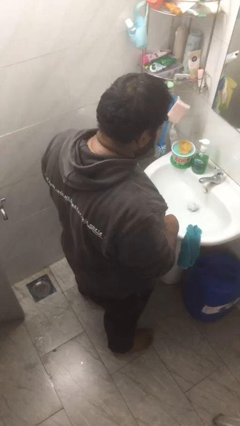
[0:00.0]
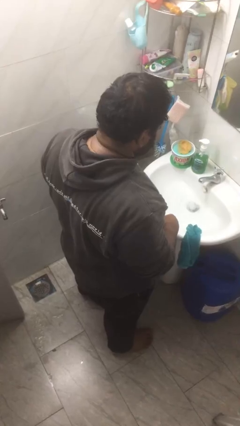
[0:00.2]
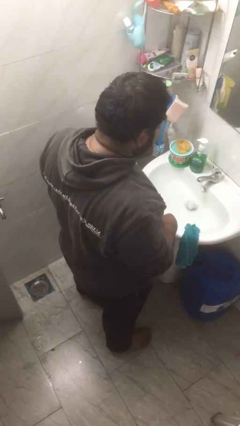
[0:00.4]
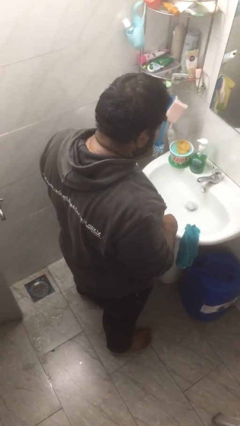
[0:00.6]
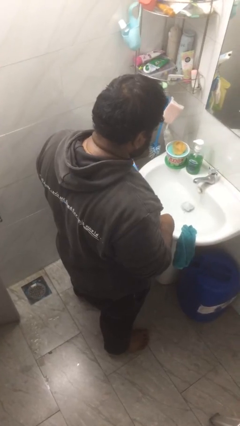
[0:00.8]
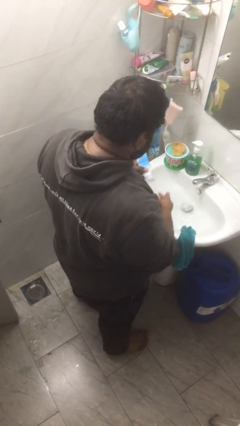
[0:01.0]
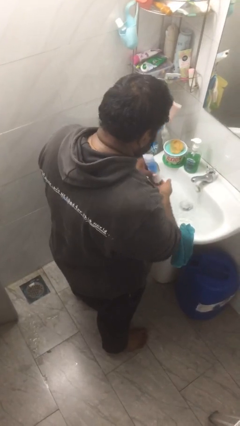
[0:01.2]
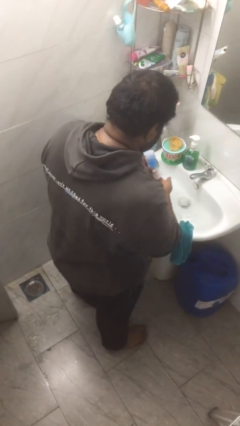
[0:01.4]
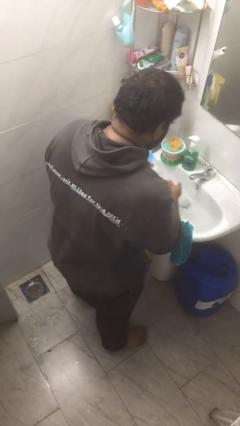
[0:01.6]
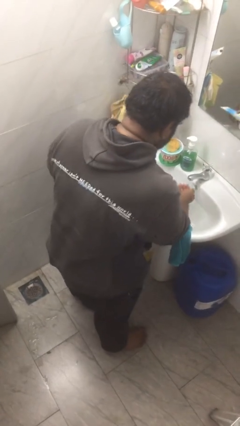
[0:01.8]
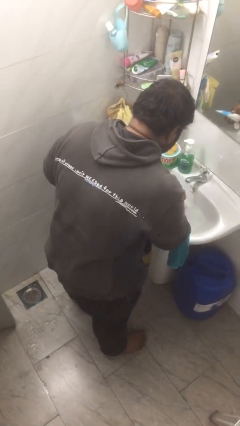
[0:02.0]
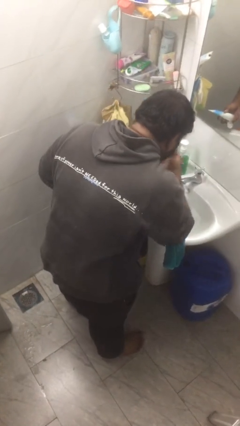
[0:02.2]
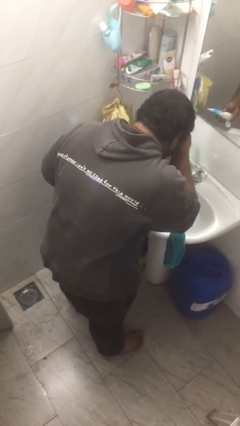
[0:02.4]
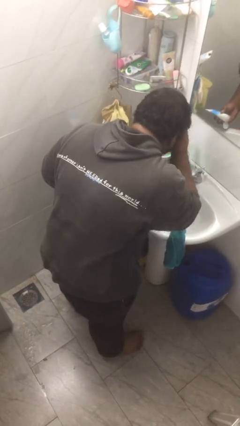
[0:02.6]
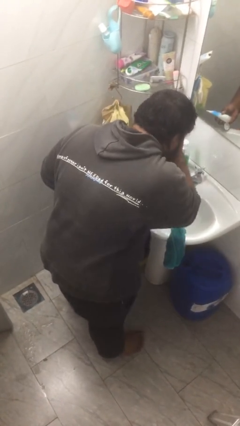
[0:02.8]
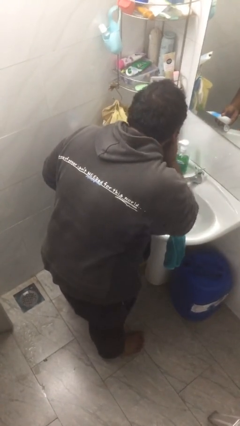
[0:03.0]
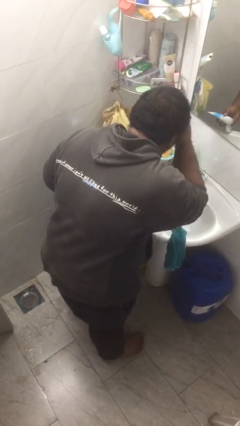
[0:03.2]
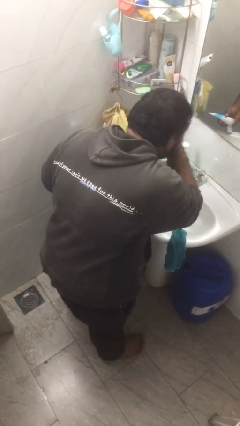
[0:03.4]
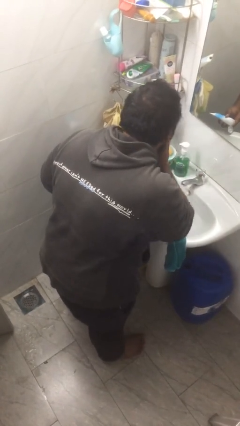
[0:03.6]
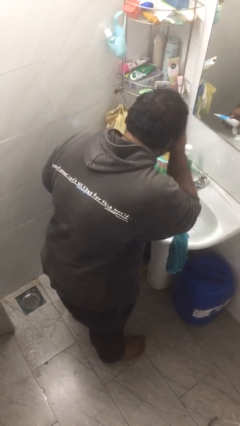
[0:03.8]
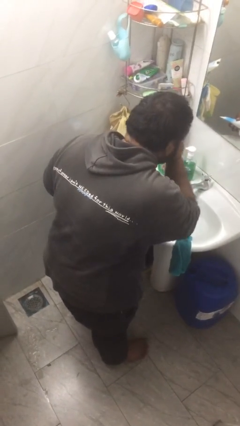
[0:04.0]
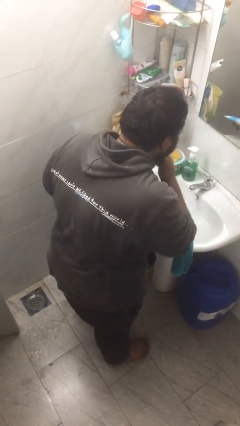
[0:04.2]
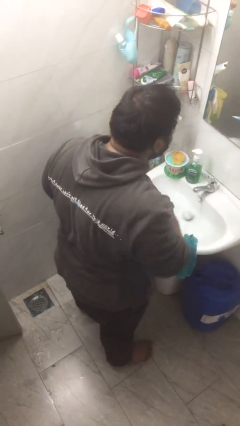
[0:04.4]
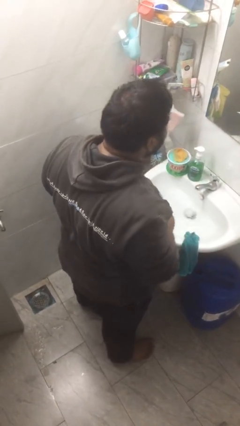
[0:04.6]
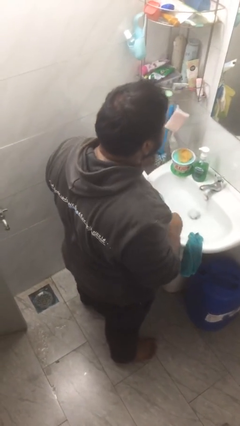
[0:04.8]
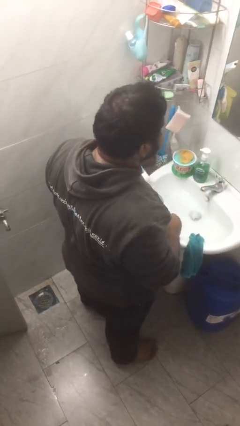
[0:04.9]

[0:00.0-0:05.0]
person washes face

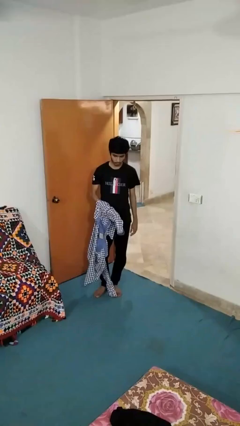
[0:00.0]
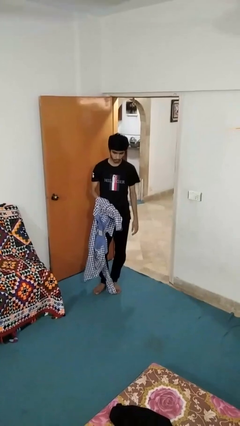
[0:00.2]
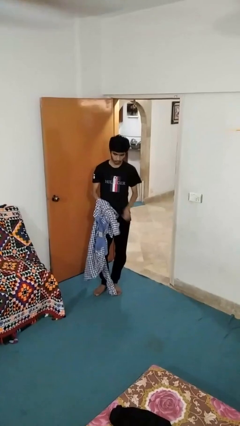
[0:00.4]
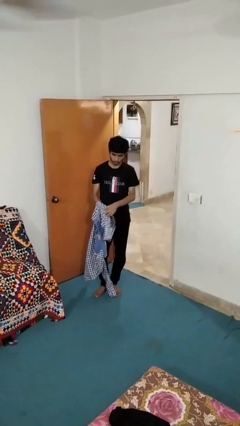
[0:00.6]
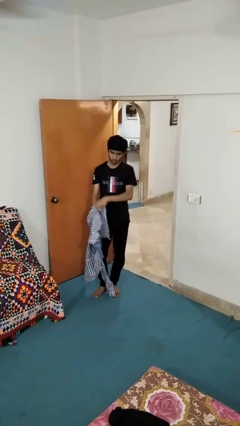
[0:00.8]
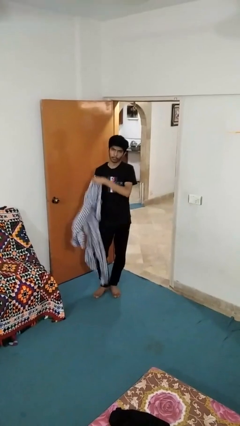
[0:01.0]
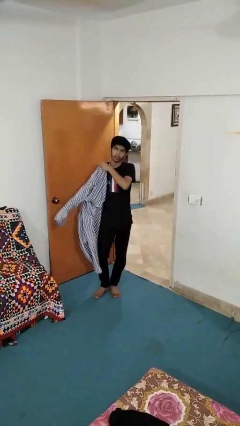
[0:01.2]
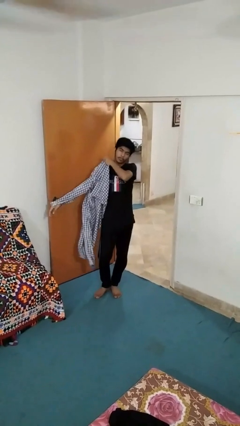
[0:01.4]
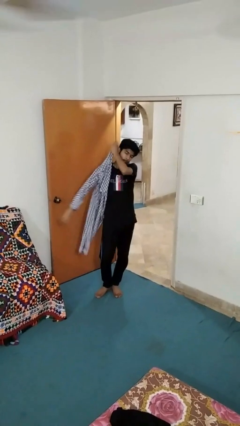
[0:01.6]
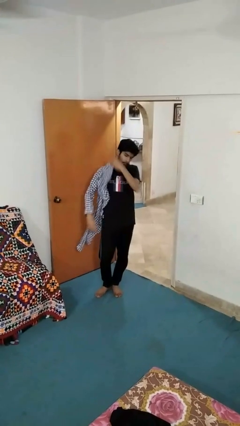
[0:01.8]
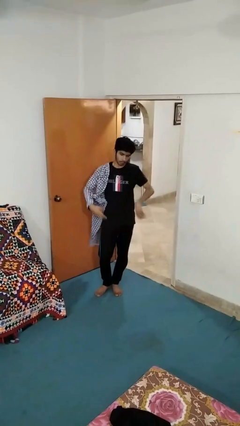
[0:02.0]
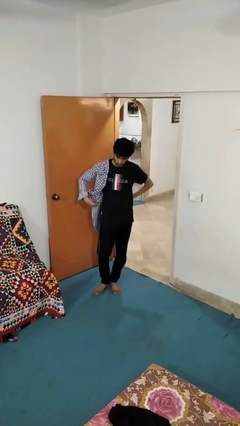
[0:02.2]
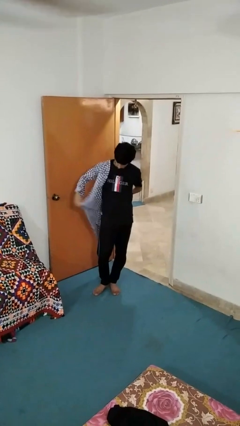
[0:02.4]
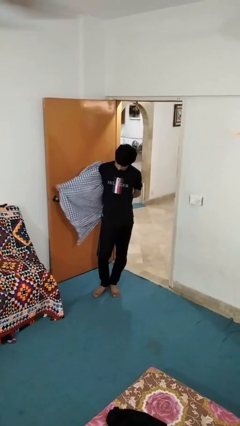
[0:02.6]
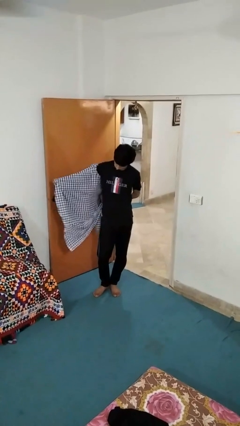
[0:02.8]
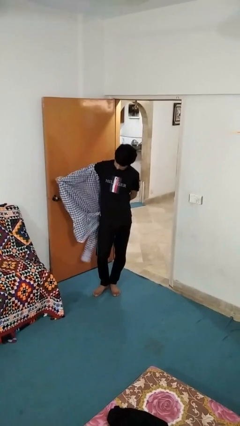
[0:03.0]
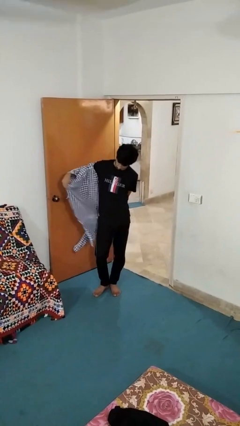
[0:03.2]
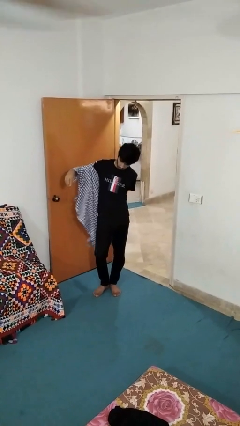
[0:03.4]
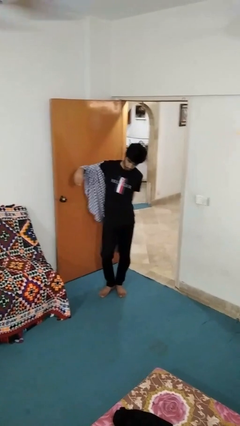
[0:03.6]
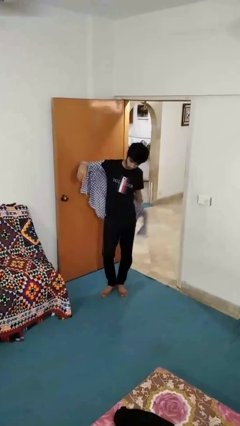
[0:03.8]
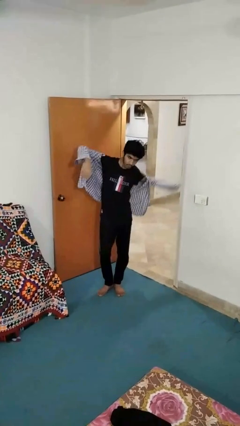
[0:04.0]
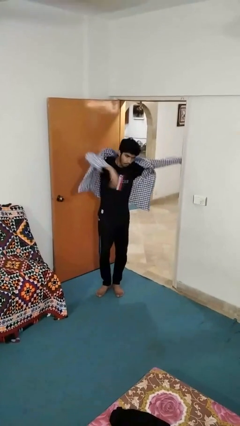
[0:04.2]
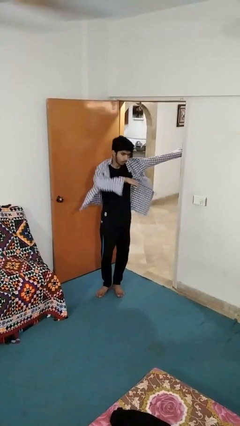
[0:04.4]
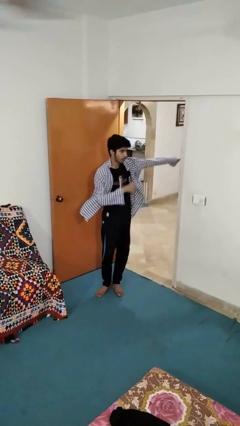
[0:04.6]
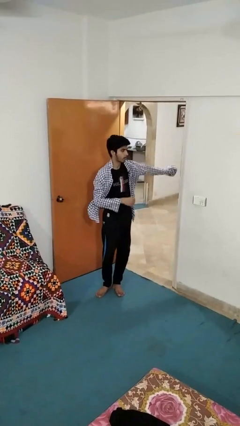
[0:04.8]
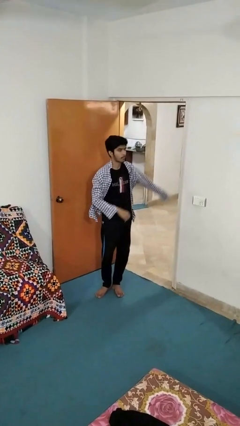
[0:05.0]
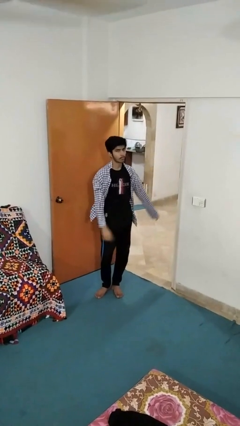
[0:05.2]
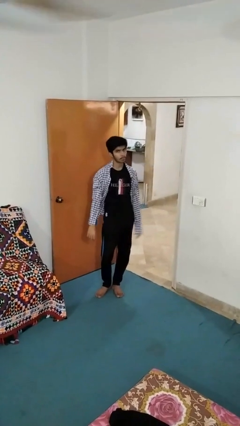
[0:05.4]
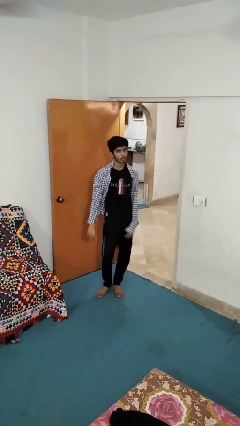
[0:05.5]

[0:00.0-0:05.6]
person puts on shirt

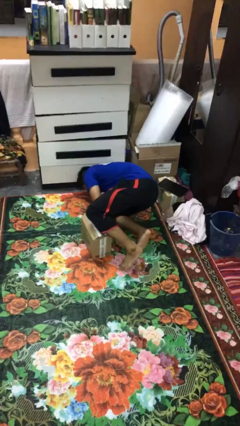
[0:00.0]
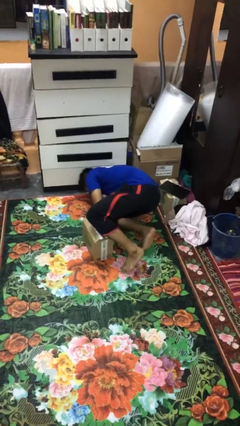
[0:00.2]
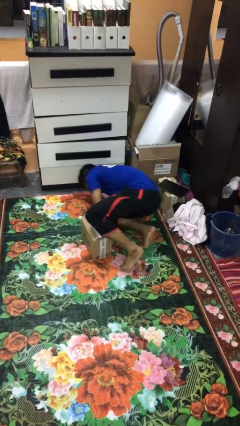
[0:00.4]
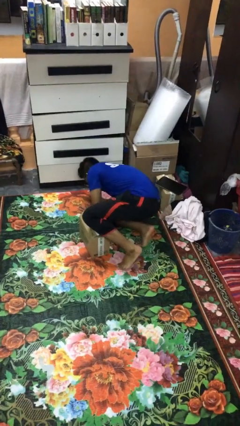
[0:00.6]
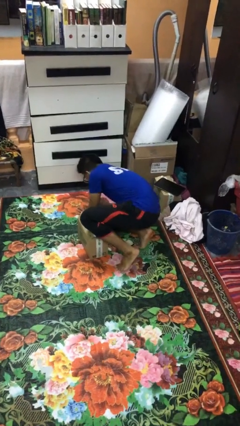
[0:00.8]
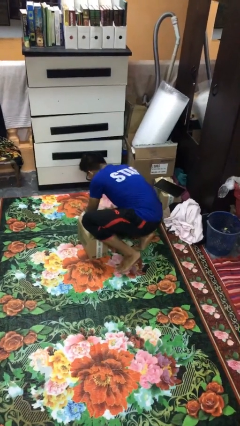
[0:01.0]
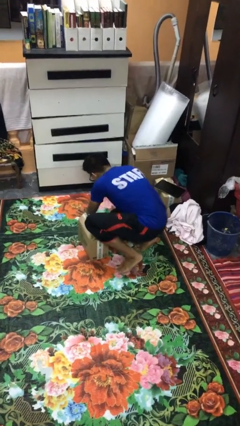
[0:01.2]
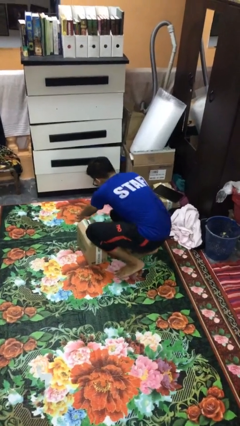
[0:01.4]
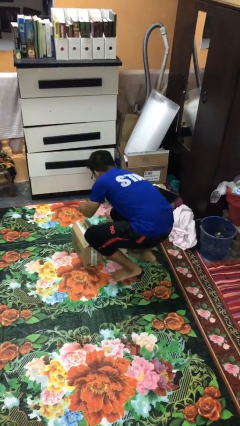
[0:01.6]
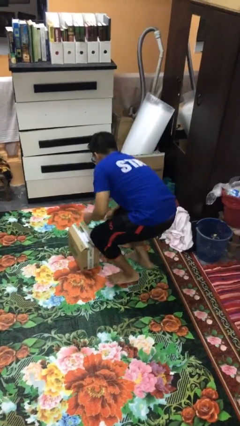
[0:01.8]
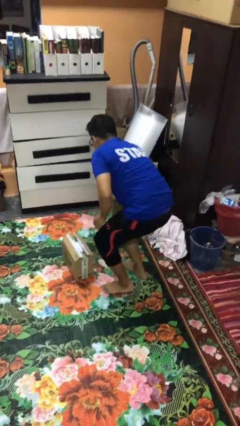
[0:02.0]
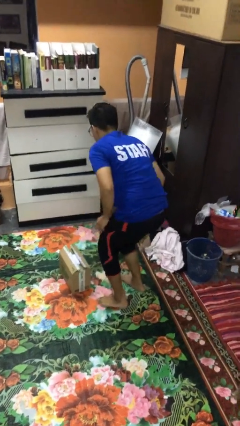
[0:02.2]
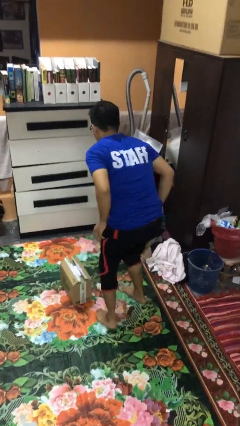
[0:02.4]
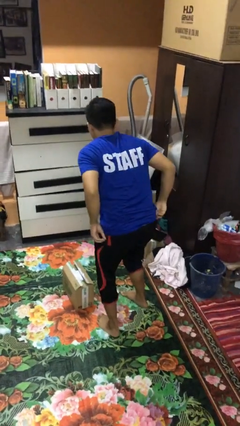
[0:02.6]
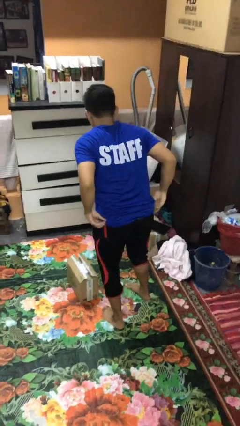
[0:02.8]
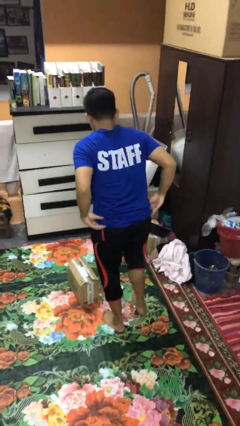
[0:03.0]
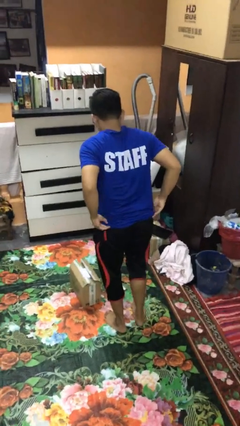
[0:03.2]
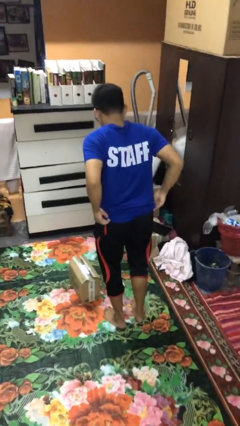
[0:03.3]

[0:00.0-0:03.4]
person stands up from floor

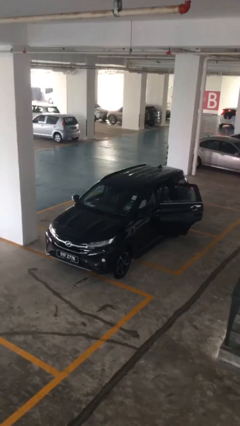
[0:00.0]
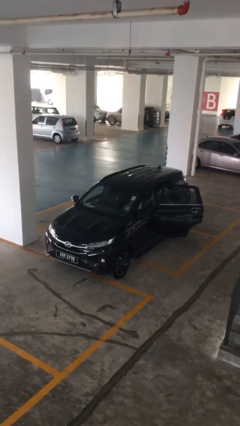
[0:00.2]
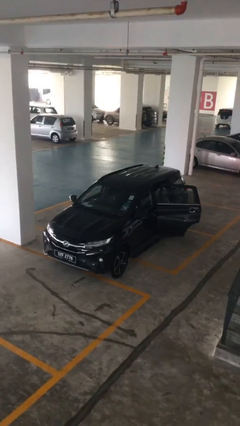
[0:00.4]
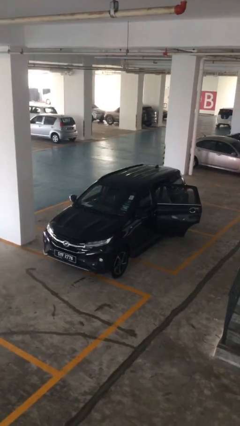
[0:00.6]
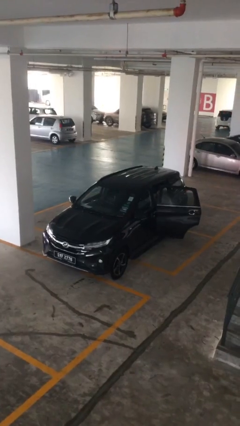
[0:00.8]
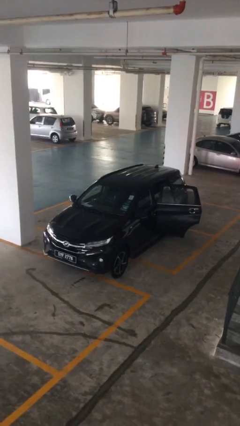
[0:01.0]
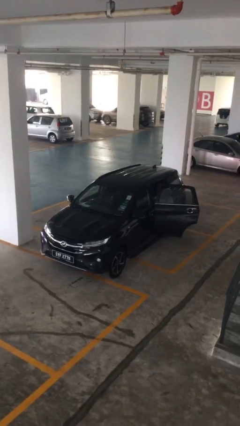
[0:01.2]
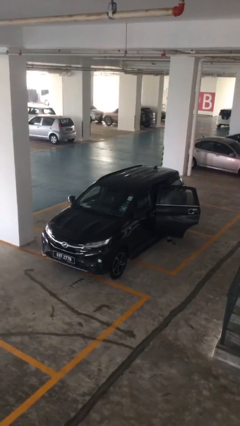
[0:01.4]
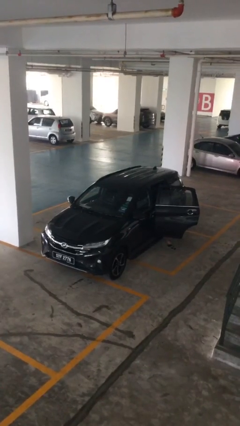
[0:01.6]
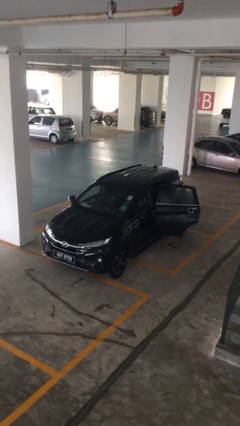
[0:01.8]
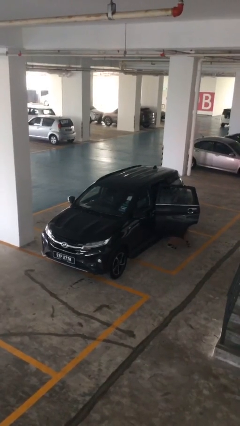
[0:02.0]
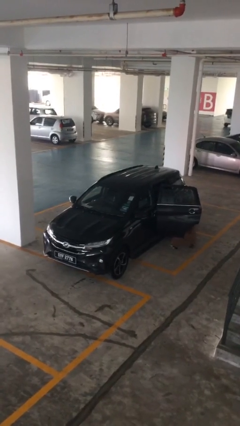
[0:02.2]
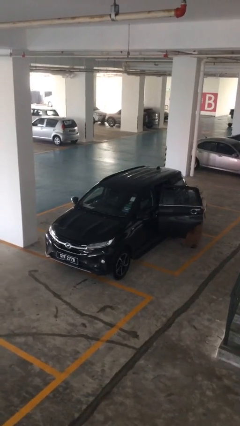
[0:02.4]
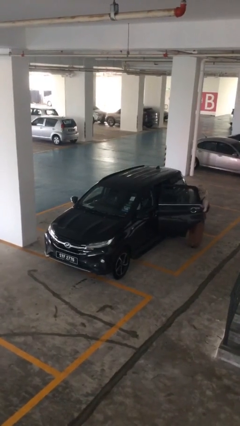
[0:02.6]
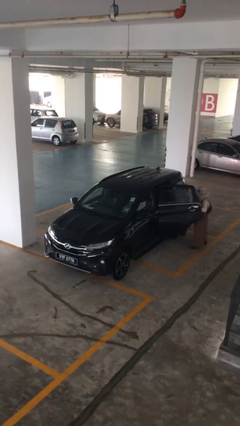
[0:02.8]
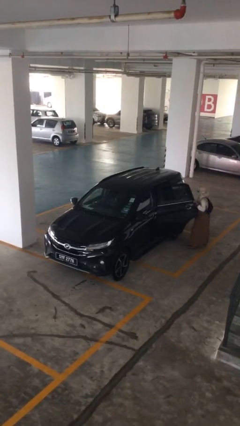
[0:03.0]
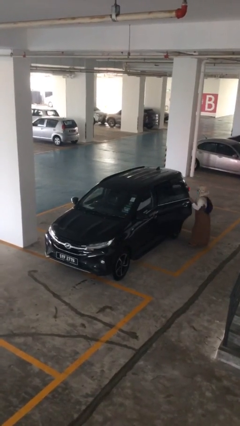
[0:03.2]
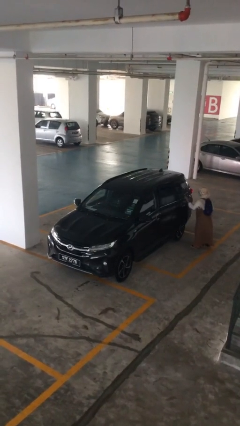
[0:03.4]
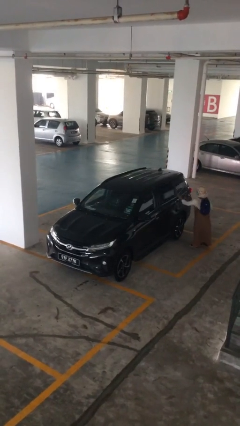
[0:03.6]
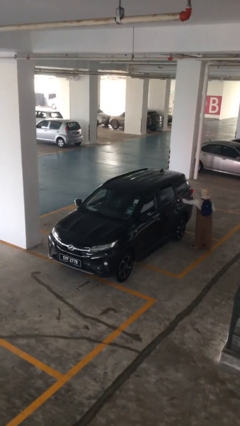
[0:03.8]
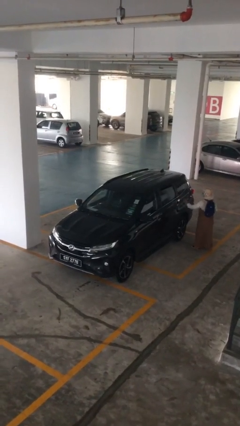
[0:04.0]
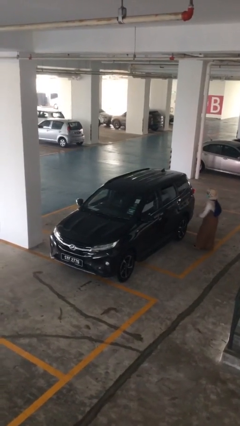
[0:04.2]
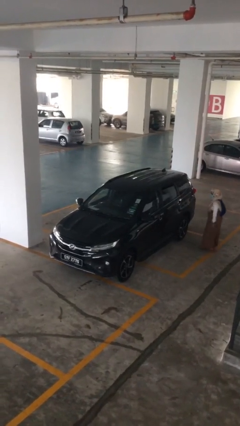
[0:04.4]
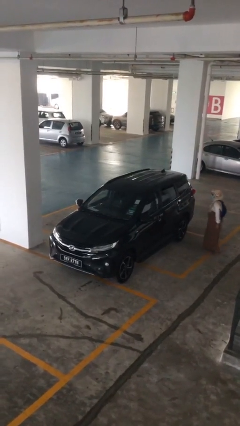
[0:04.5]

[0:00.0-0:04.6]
car drops off person
